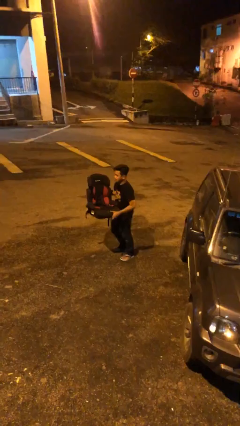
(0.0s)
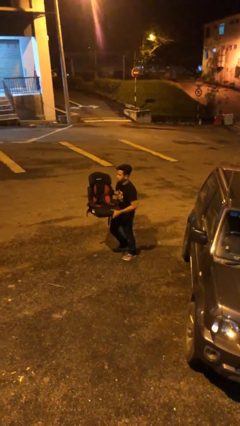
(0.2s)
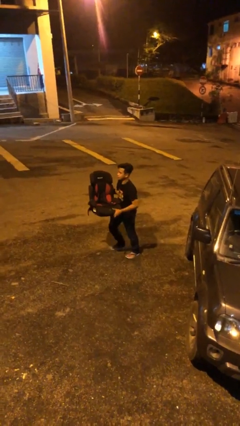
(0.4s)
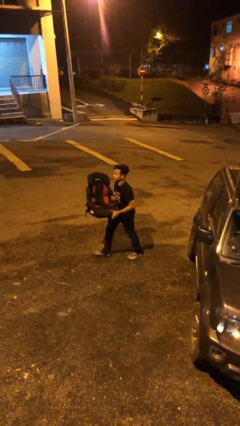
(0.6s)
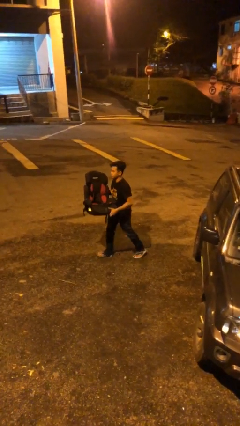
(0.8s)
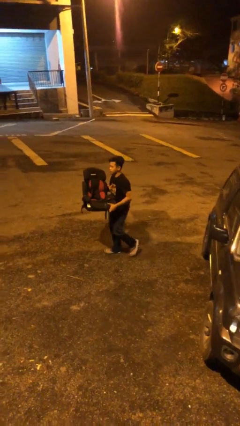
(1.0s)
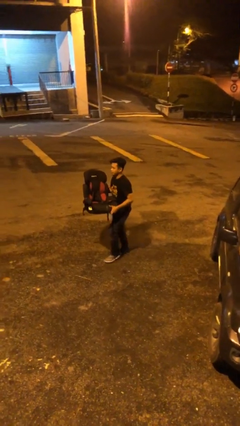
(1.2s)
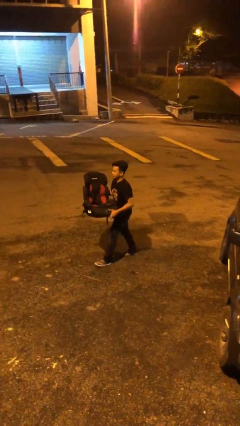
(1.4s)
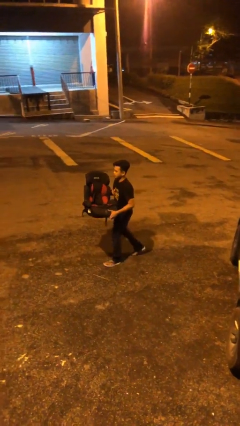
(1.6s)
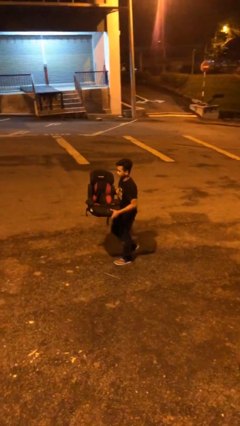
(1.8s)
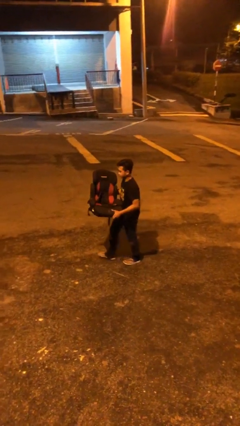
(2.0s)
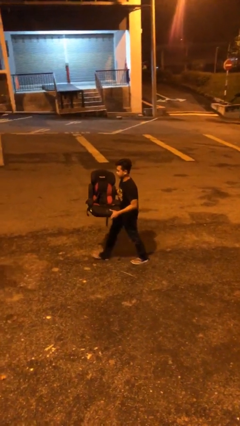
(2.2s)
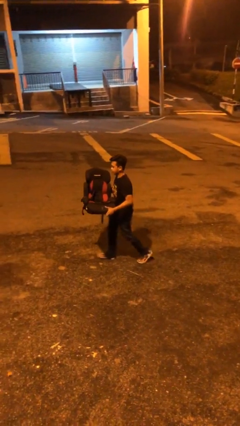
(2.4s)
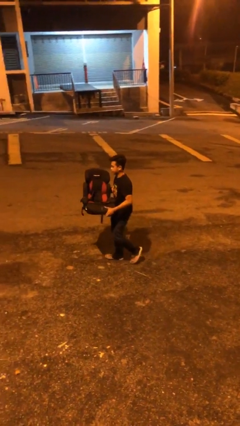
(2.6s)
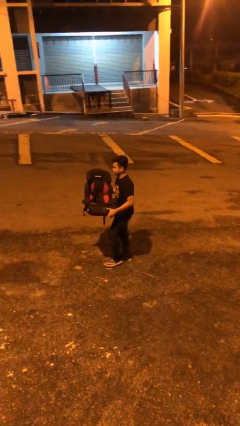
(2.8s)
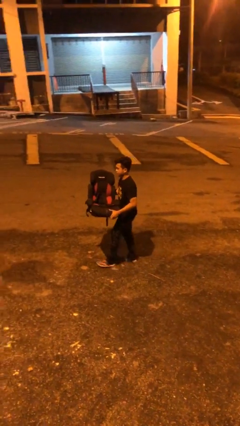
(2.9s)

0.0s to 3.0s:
person carries heavy object

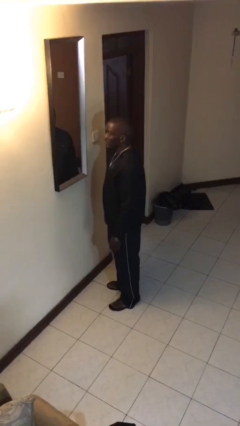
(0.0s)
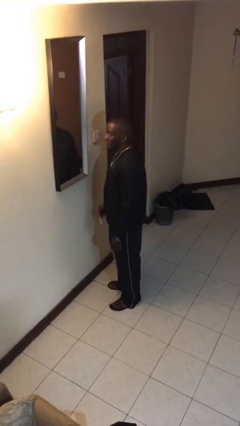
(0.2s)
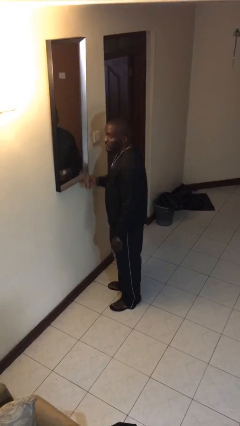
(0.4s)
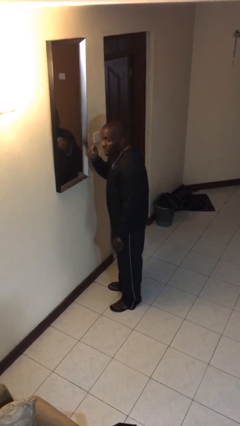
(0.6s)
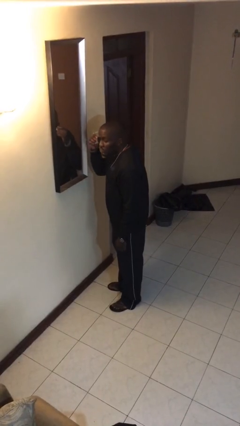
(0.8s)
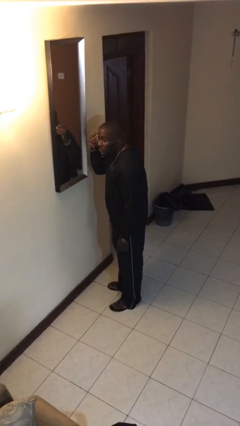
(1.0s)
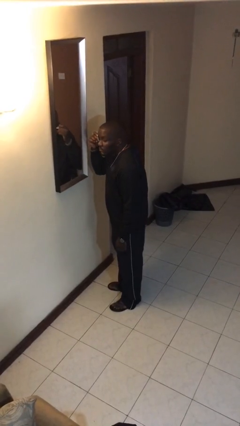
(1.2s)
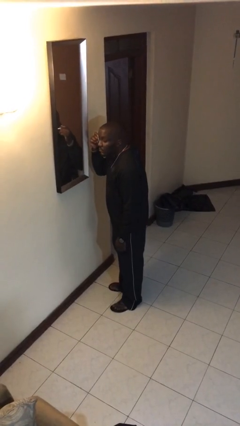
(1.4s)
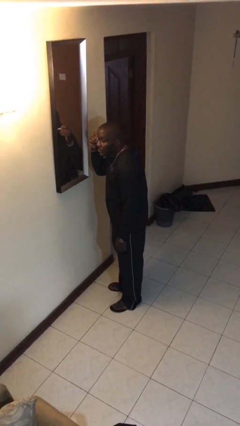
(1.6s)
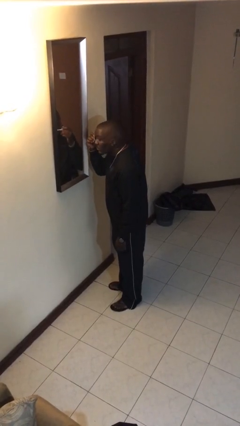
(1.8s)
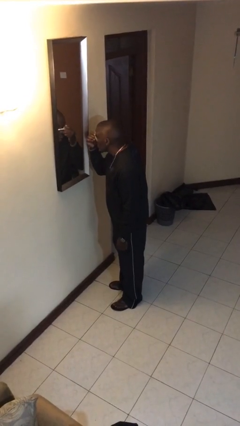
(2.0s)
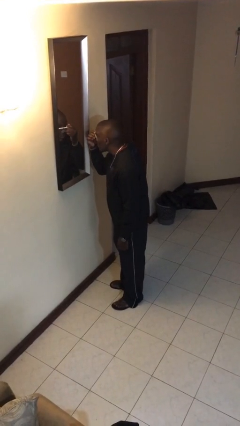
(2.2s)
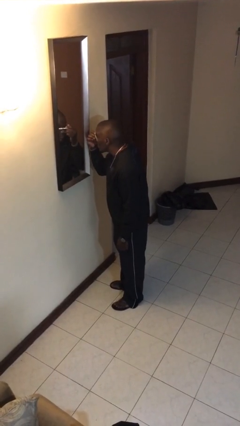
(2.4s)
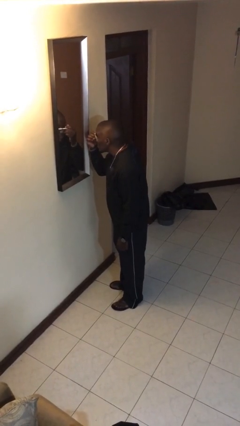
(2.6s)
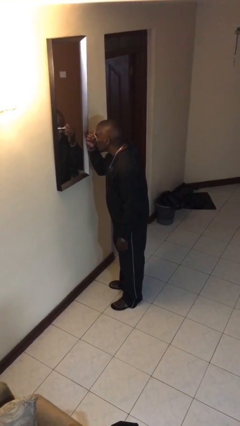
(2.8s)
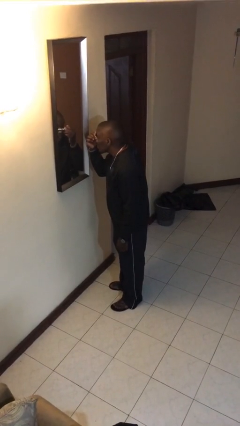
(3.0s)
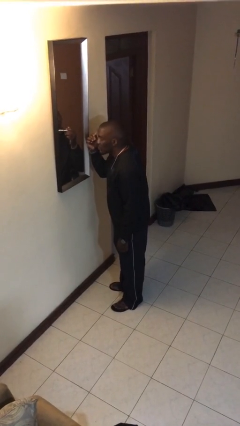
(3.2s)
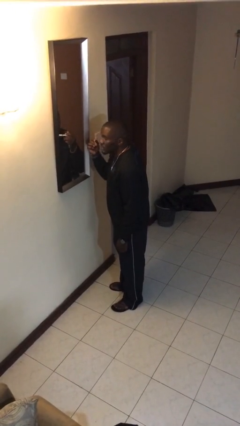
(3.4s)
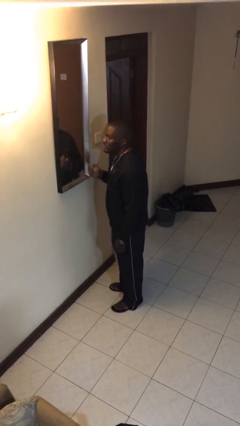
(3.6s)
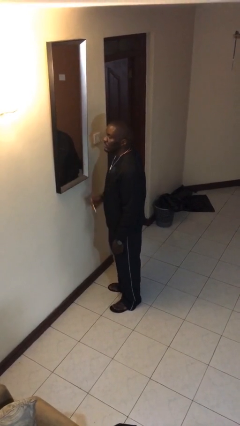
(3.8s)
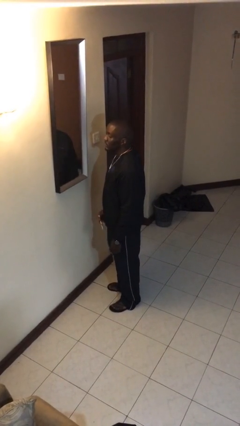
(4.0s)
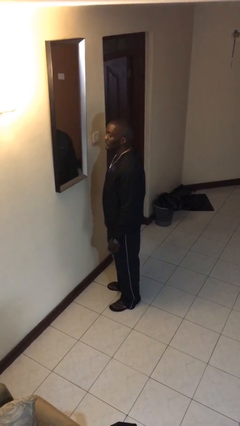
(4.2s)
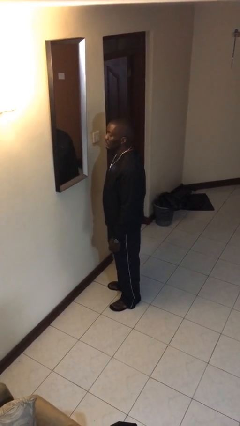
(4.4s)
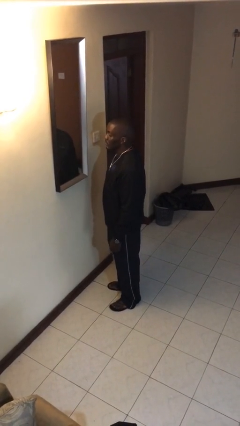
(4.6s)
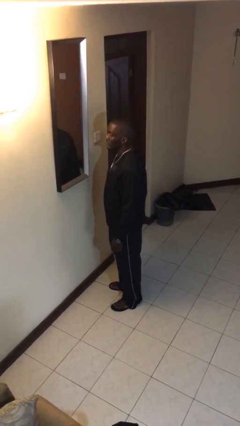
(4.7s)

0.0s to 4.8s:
person applies eye makeup

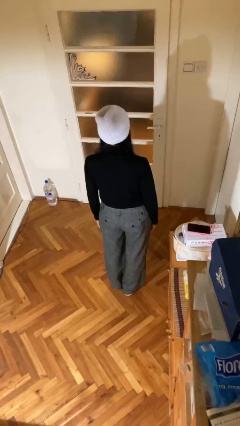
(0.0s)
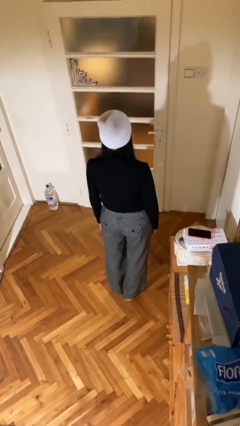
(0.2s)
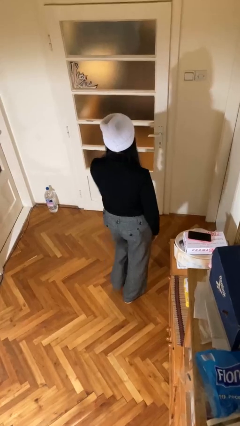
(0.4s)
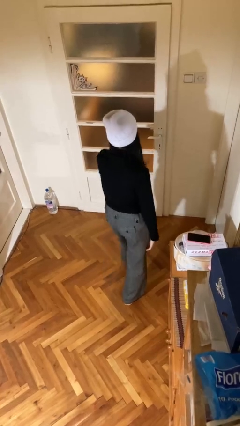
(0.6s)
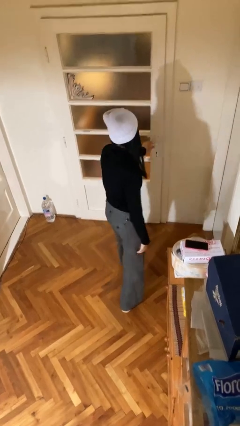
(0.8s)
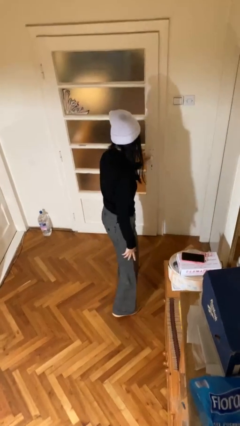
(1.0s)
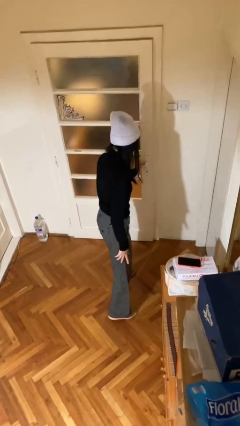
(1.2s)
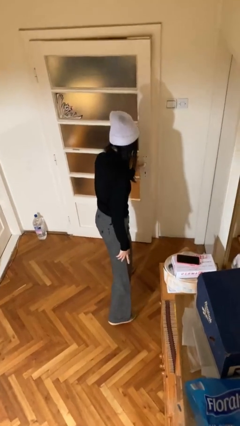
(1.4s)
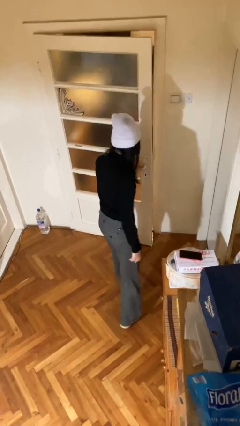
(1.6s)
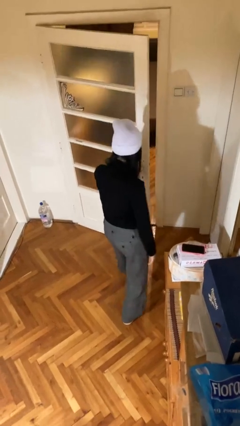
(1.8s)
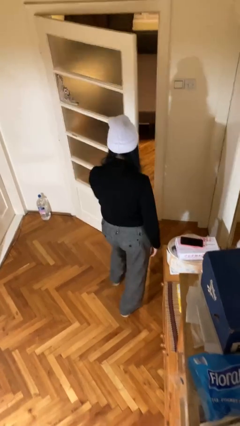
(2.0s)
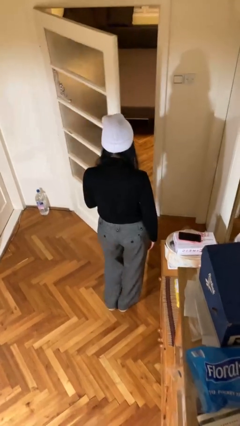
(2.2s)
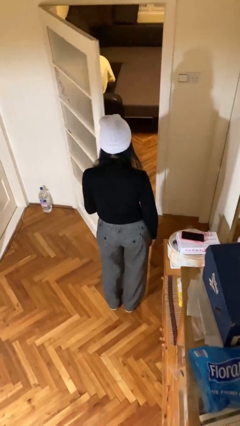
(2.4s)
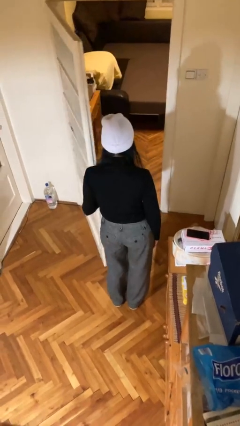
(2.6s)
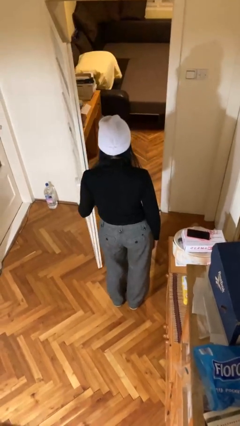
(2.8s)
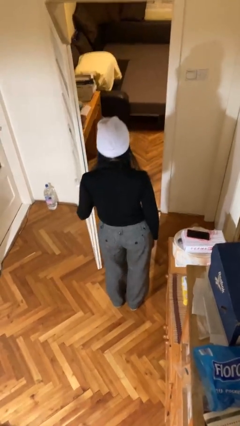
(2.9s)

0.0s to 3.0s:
person opens facility door

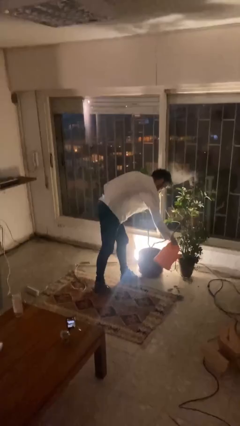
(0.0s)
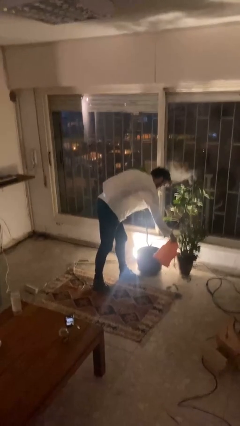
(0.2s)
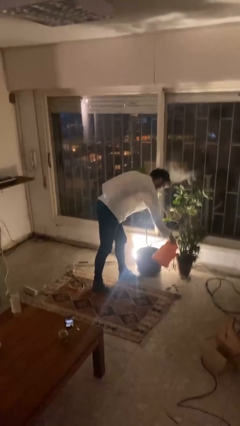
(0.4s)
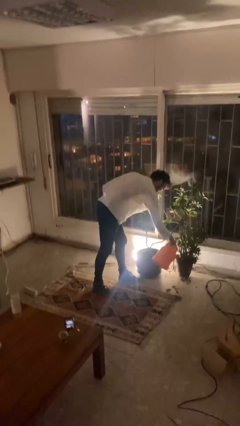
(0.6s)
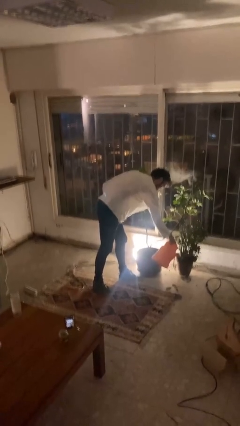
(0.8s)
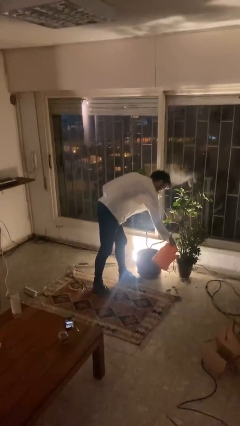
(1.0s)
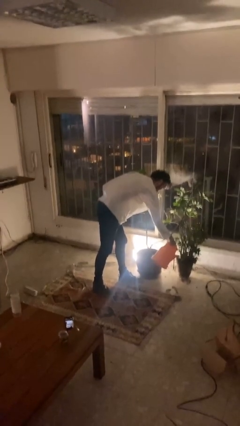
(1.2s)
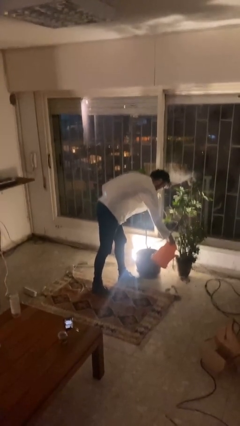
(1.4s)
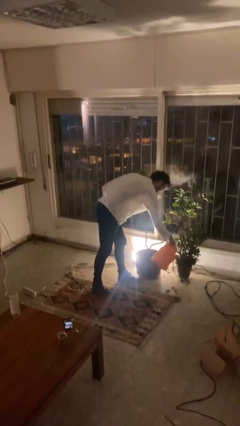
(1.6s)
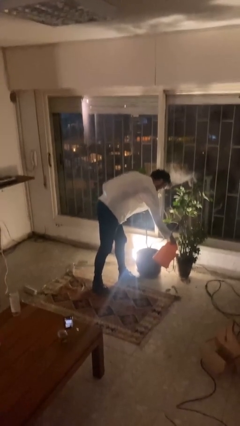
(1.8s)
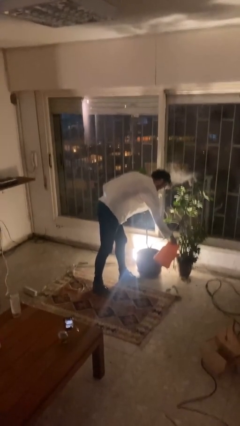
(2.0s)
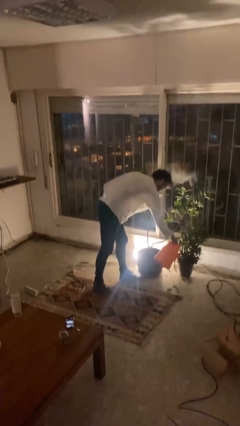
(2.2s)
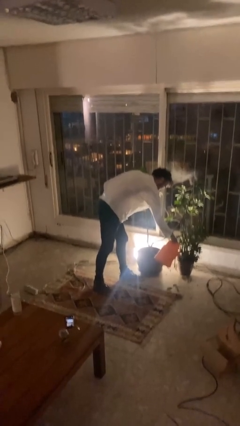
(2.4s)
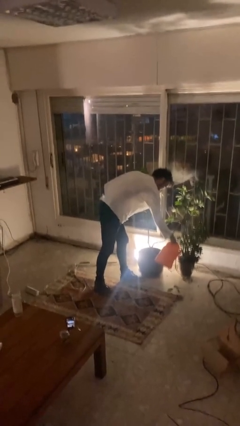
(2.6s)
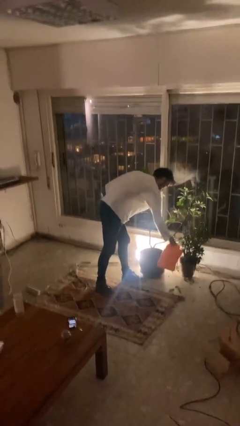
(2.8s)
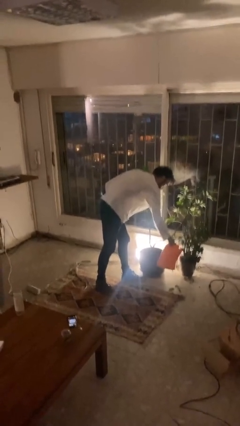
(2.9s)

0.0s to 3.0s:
person waters houseplant

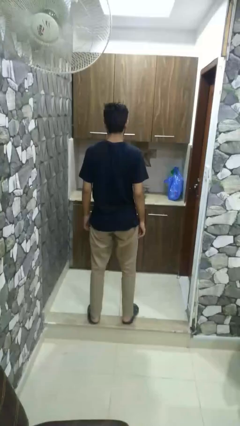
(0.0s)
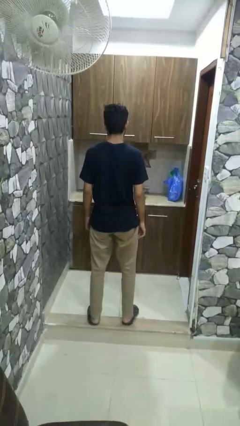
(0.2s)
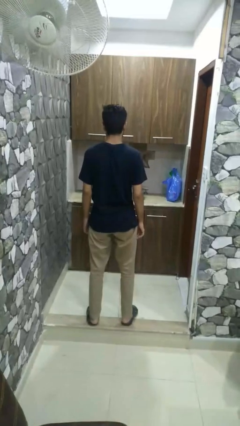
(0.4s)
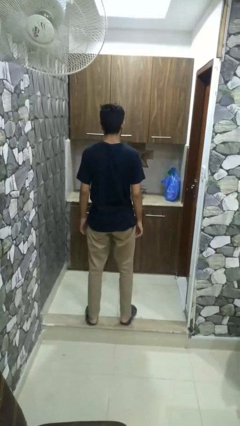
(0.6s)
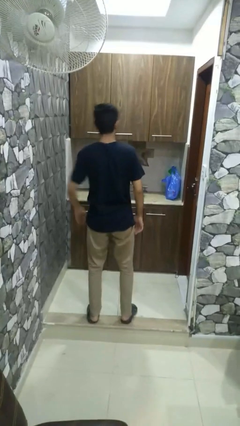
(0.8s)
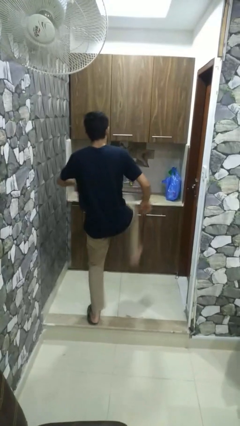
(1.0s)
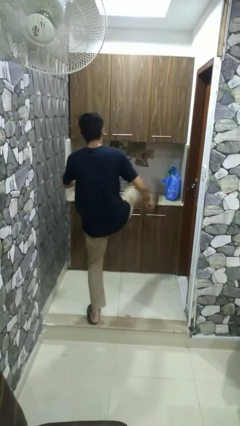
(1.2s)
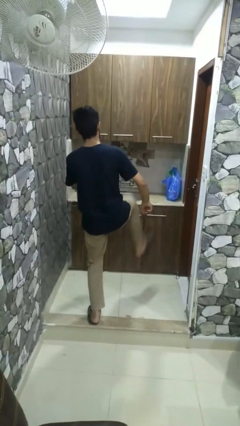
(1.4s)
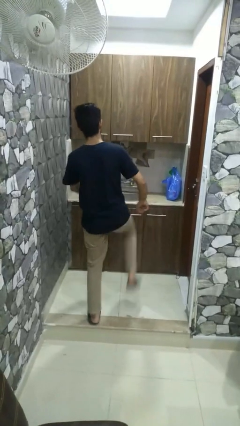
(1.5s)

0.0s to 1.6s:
person karate kicks

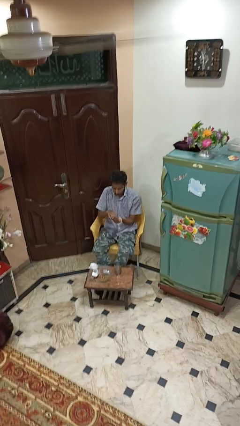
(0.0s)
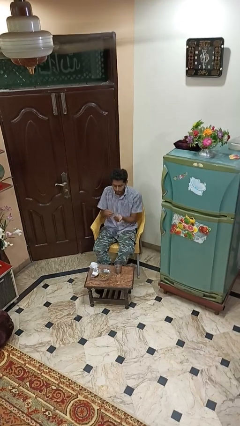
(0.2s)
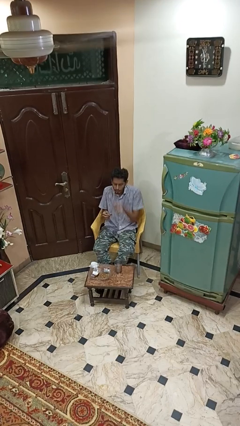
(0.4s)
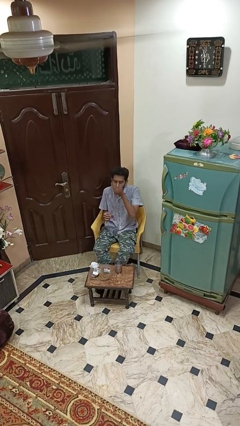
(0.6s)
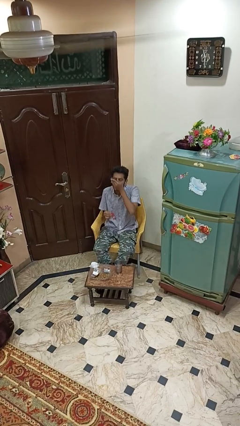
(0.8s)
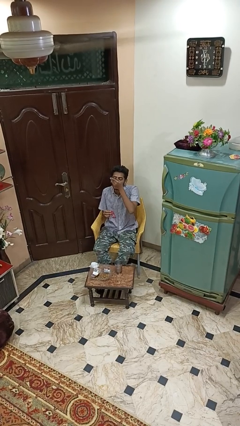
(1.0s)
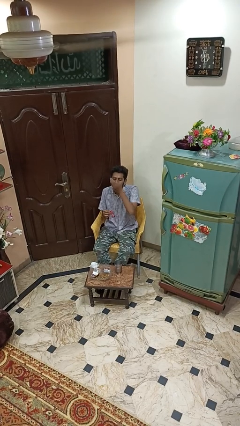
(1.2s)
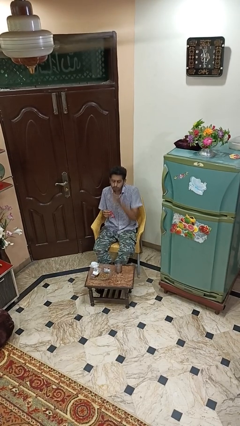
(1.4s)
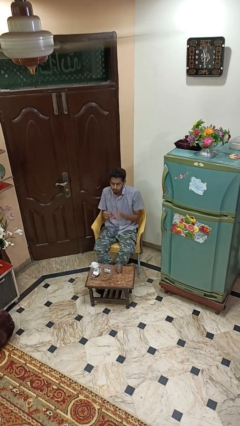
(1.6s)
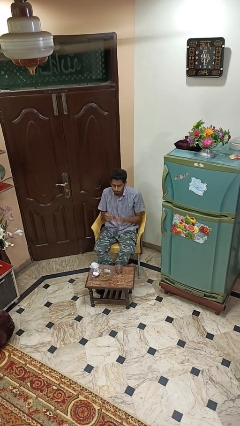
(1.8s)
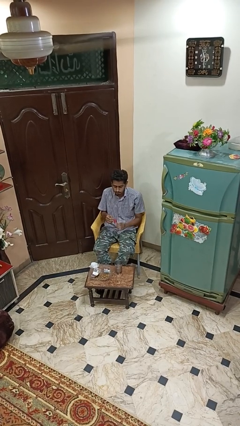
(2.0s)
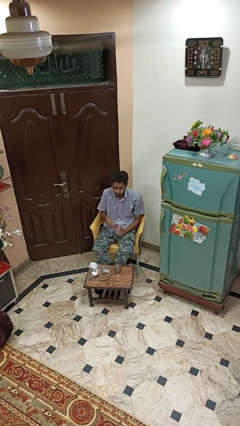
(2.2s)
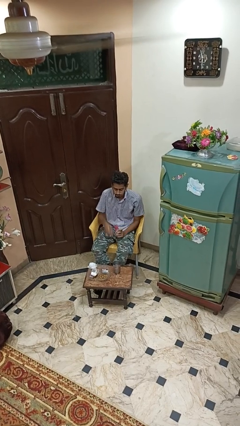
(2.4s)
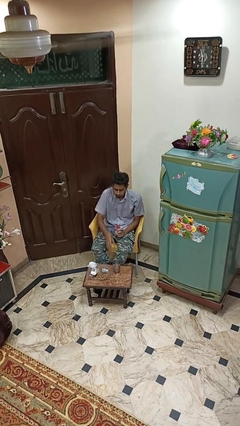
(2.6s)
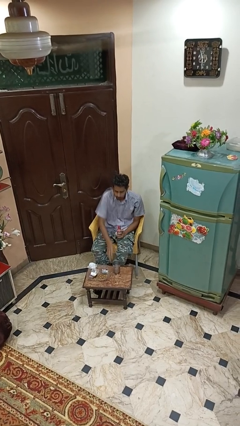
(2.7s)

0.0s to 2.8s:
person takes medicine pills
